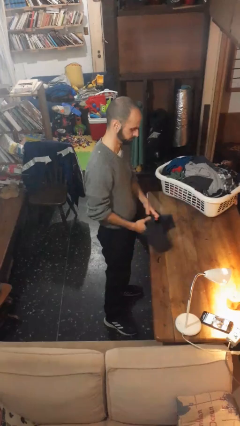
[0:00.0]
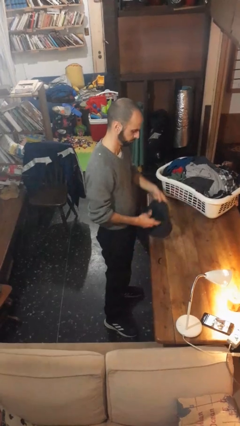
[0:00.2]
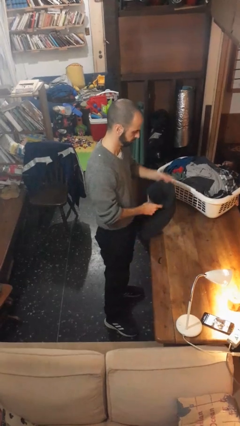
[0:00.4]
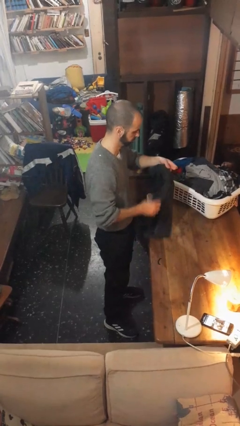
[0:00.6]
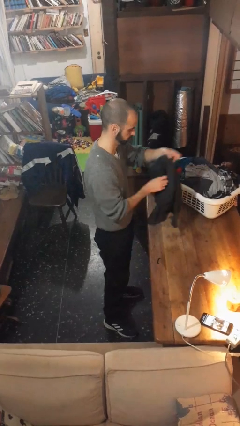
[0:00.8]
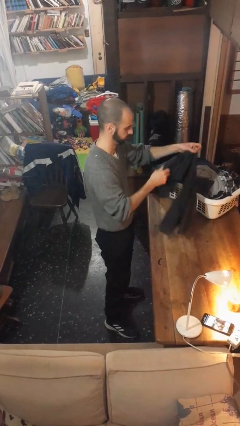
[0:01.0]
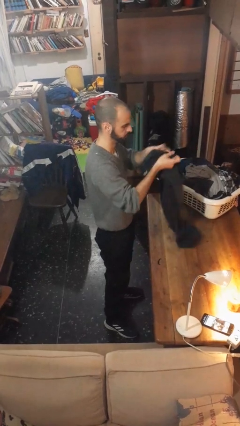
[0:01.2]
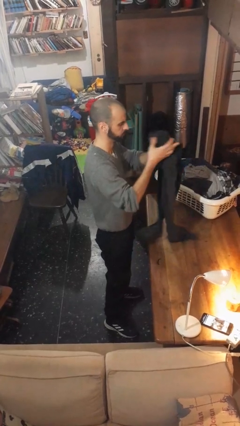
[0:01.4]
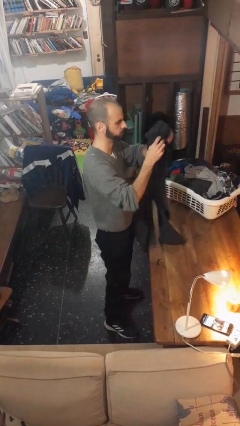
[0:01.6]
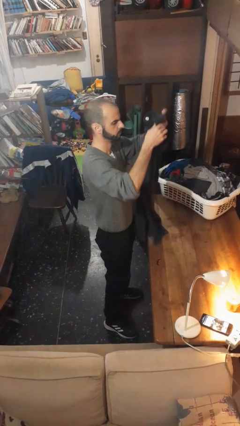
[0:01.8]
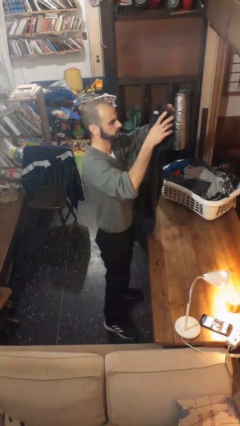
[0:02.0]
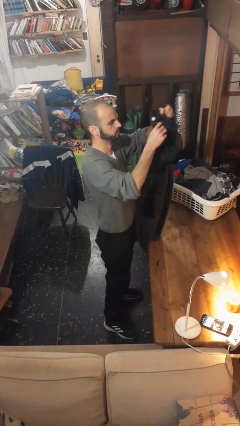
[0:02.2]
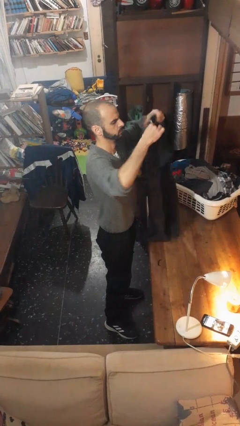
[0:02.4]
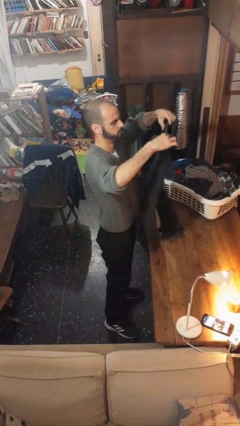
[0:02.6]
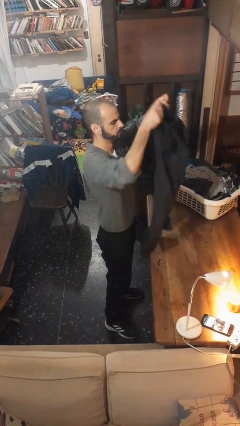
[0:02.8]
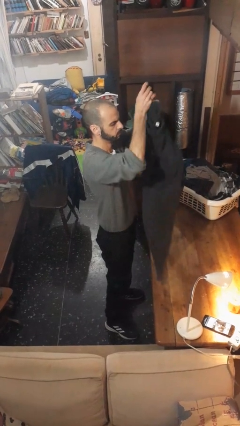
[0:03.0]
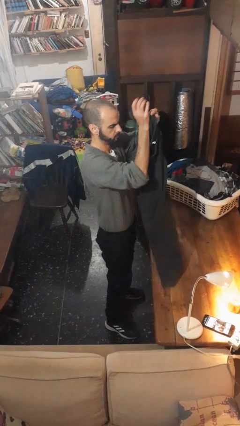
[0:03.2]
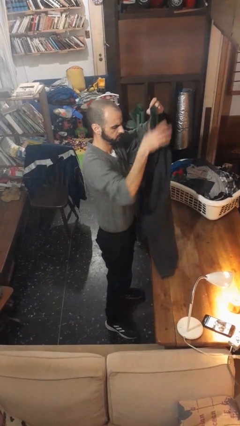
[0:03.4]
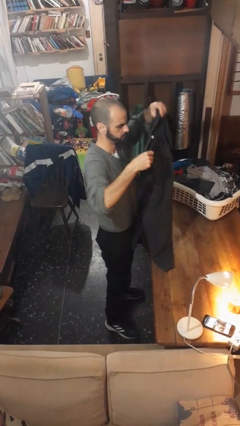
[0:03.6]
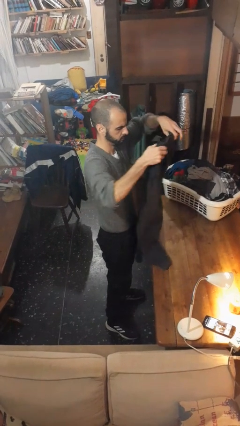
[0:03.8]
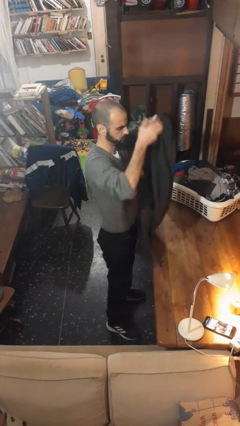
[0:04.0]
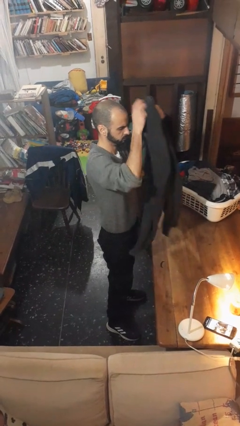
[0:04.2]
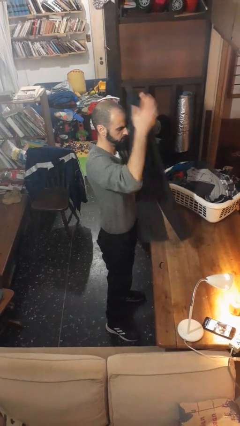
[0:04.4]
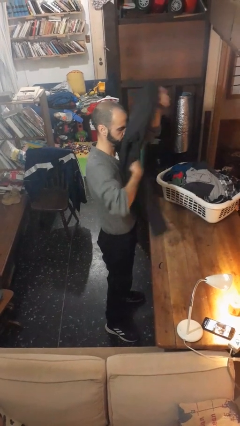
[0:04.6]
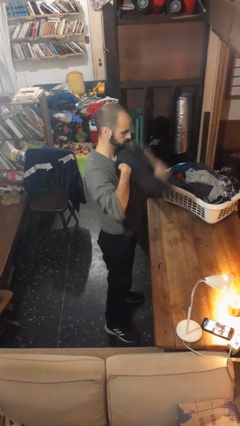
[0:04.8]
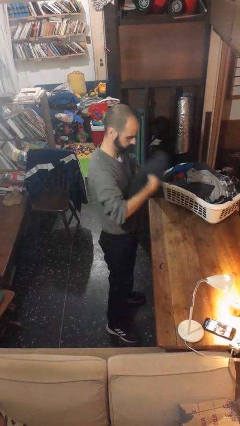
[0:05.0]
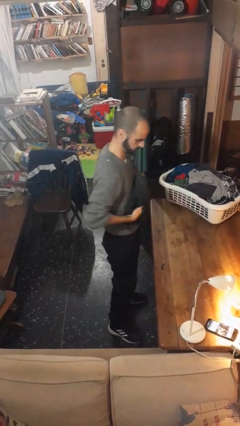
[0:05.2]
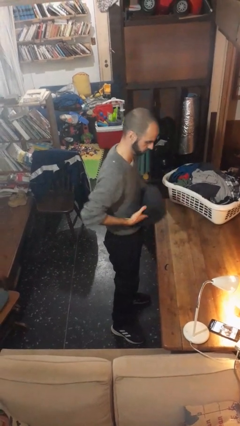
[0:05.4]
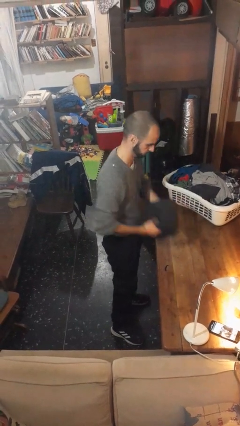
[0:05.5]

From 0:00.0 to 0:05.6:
person folds pants

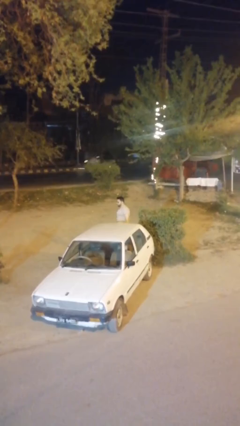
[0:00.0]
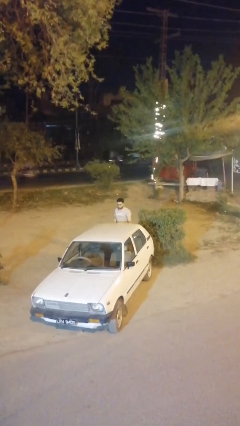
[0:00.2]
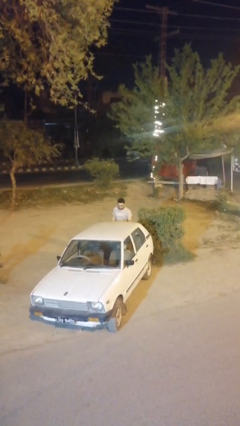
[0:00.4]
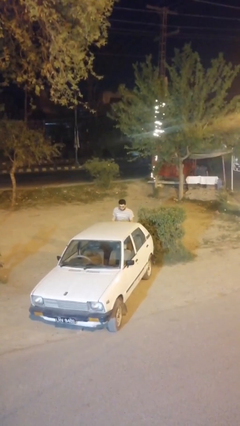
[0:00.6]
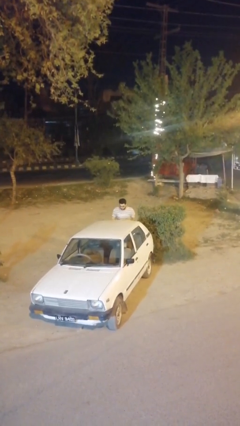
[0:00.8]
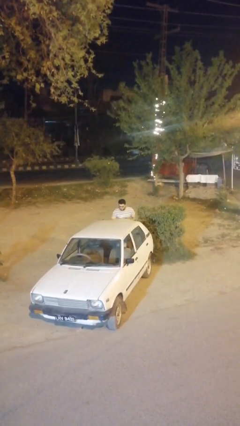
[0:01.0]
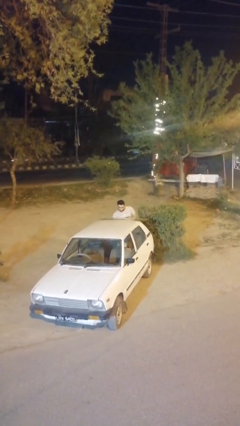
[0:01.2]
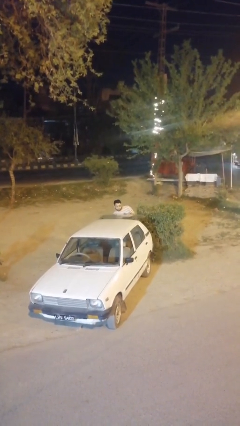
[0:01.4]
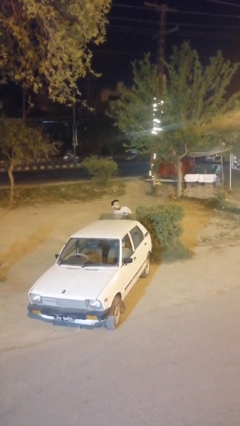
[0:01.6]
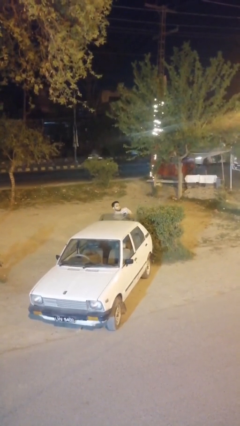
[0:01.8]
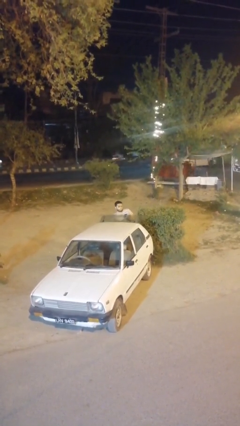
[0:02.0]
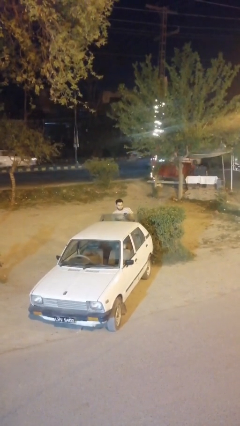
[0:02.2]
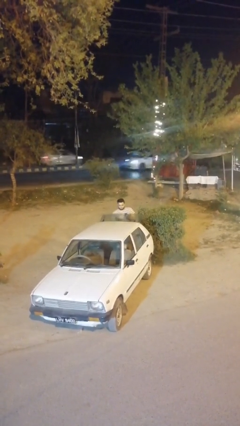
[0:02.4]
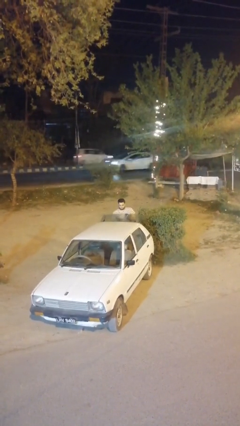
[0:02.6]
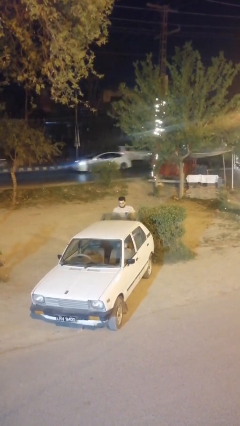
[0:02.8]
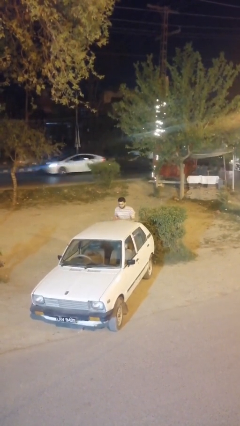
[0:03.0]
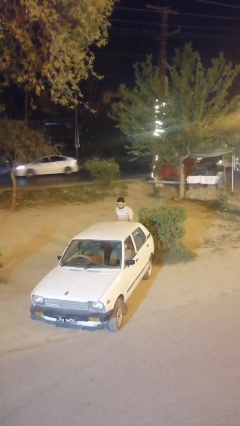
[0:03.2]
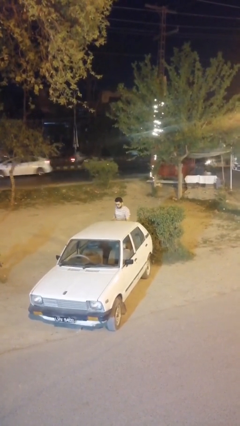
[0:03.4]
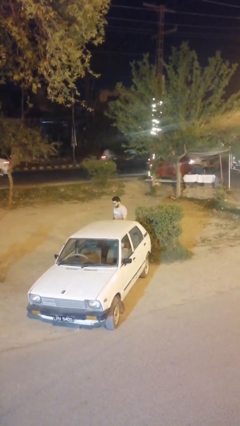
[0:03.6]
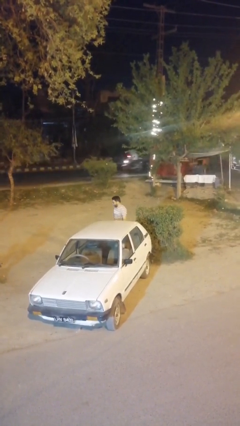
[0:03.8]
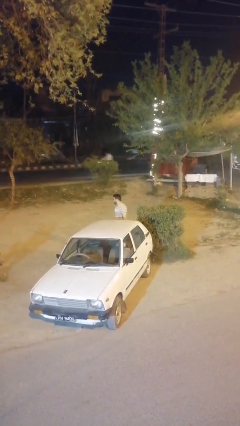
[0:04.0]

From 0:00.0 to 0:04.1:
person unloads car

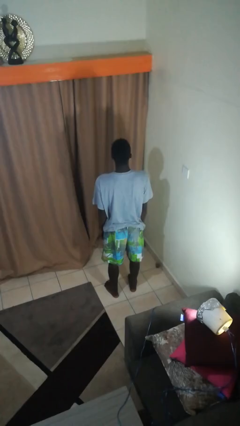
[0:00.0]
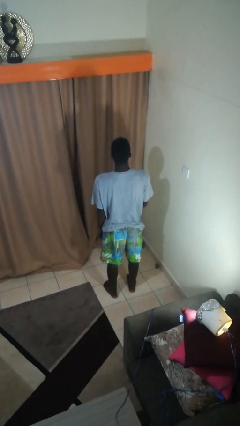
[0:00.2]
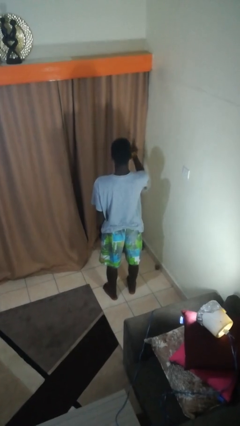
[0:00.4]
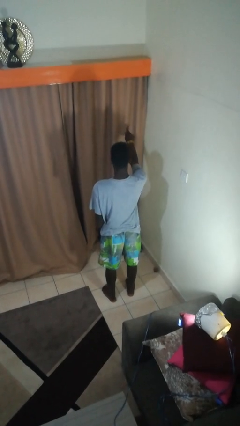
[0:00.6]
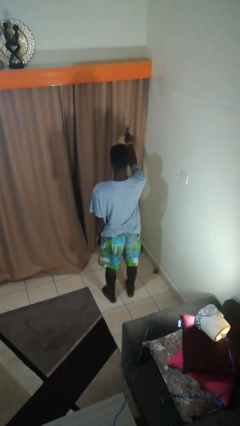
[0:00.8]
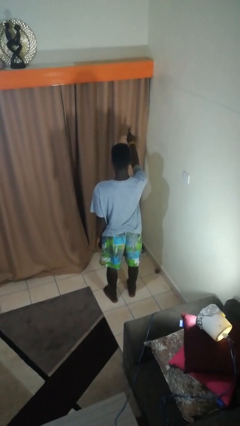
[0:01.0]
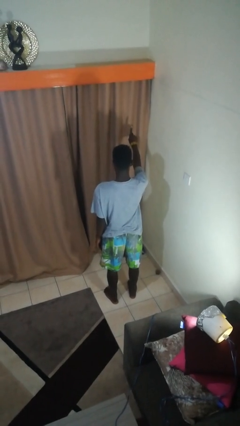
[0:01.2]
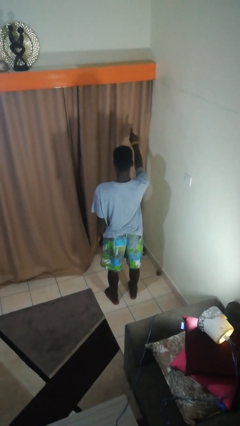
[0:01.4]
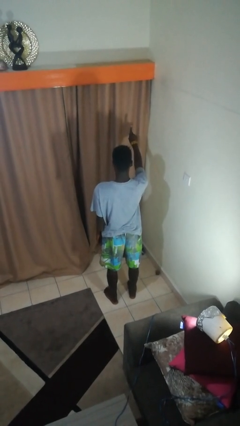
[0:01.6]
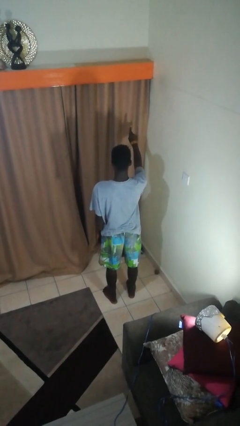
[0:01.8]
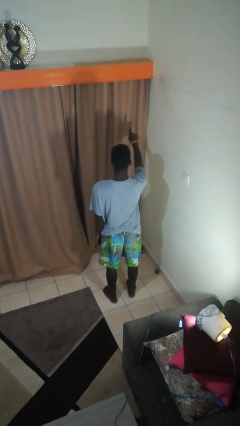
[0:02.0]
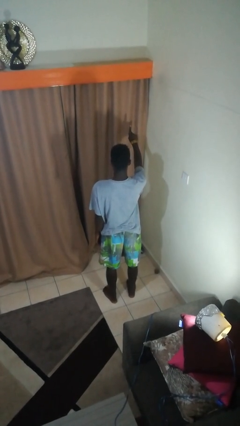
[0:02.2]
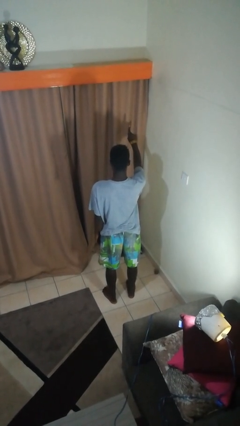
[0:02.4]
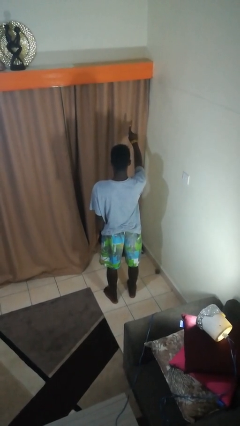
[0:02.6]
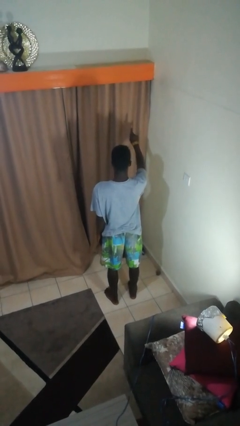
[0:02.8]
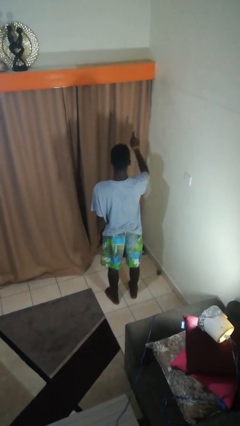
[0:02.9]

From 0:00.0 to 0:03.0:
person gestures number one

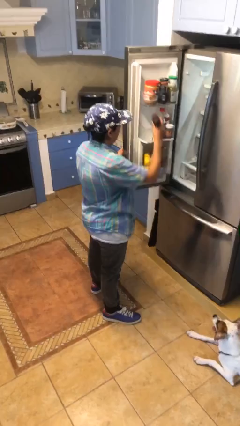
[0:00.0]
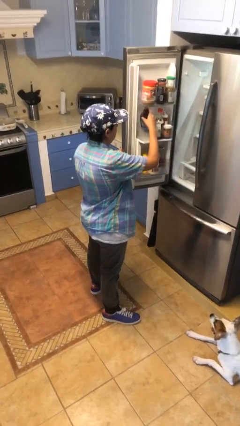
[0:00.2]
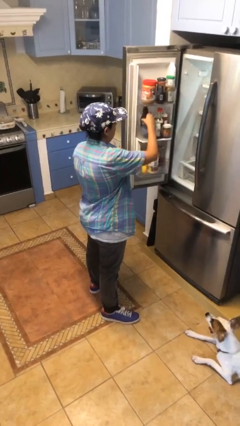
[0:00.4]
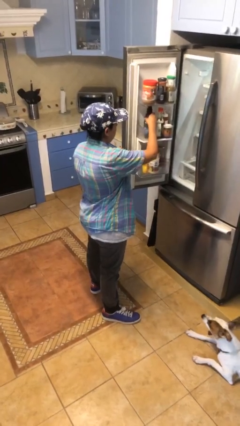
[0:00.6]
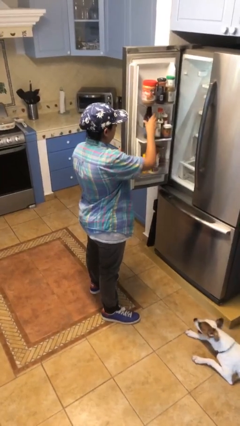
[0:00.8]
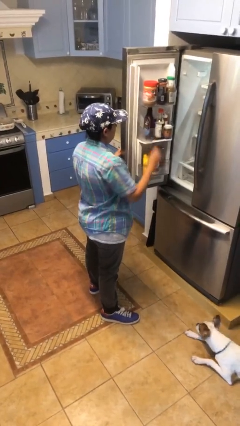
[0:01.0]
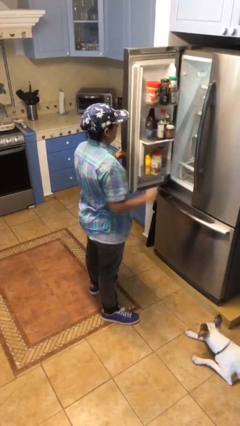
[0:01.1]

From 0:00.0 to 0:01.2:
person puts object into refrigerator

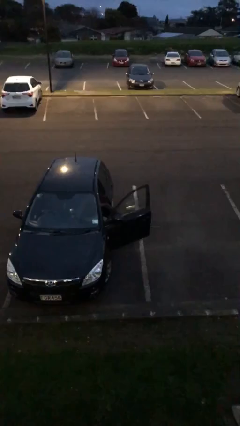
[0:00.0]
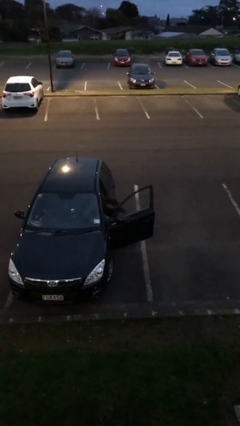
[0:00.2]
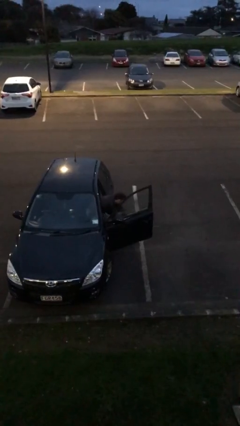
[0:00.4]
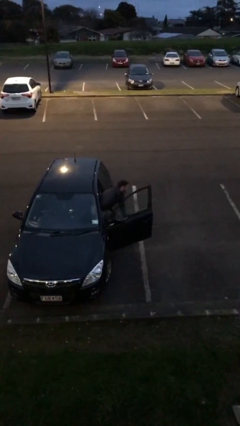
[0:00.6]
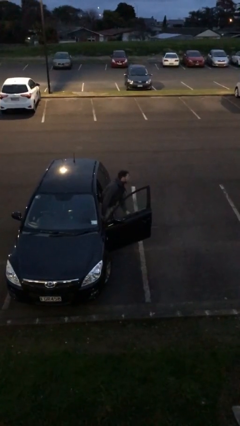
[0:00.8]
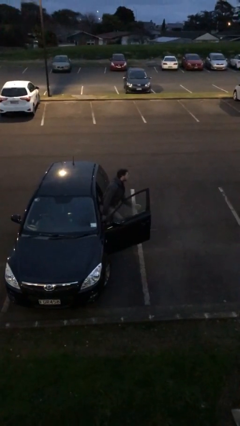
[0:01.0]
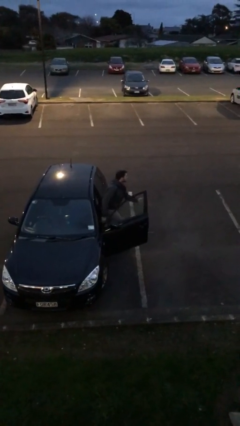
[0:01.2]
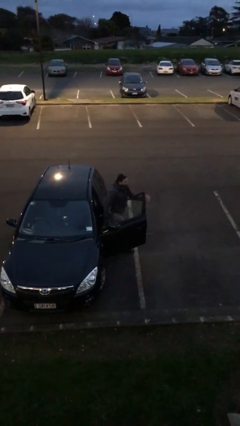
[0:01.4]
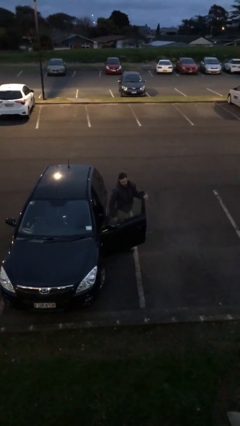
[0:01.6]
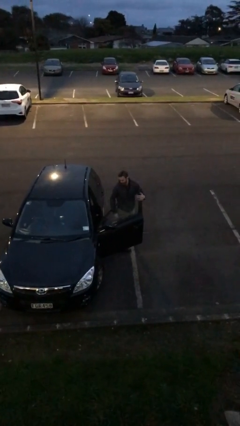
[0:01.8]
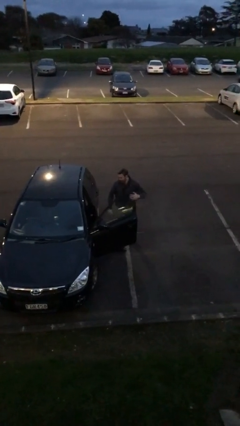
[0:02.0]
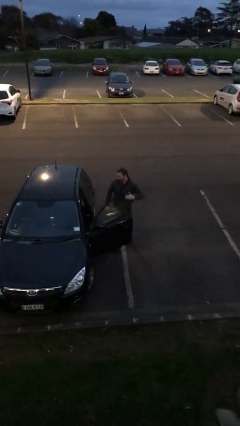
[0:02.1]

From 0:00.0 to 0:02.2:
person exits car

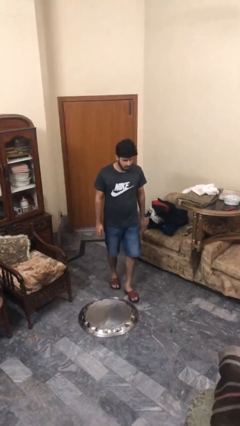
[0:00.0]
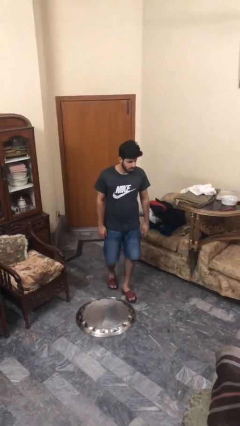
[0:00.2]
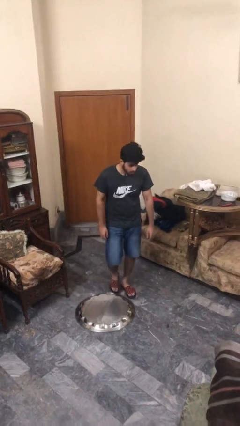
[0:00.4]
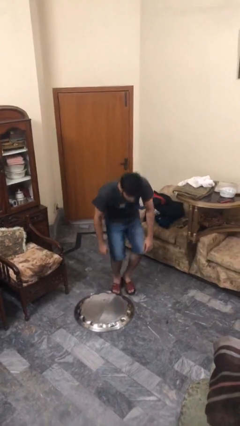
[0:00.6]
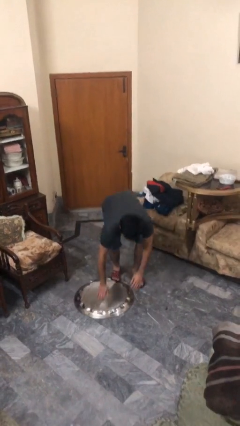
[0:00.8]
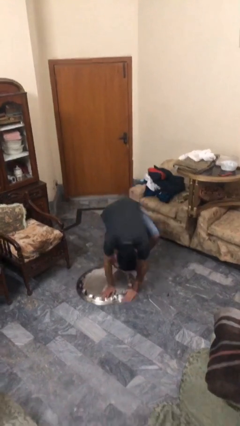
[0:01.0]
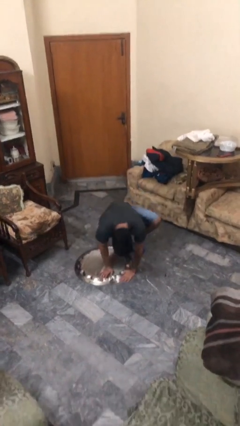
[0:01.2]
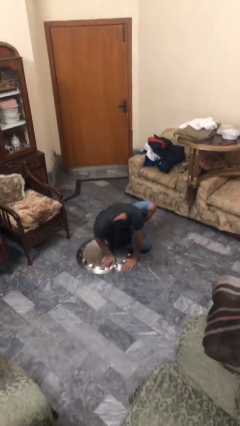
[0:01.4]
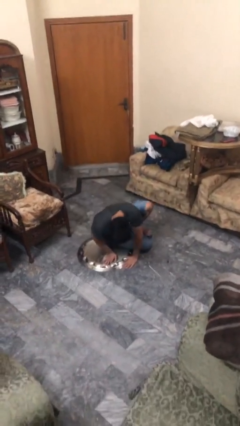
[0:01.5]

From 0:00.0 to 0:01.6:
person trips on object on floor
